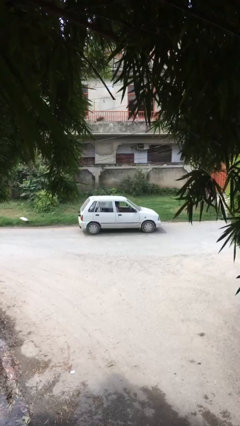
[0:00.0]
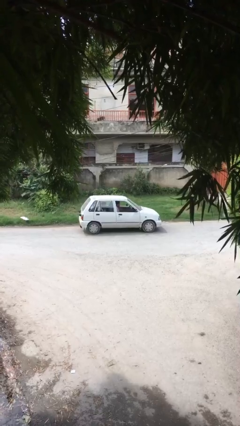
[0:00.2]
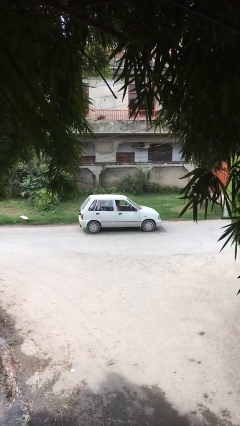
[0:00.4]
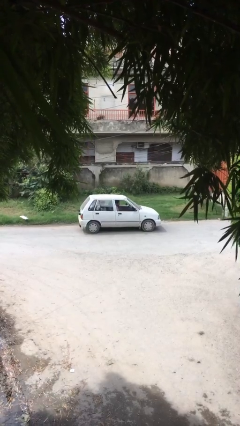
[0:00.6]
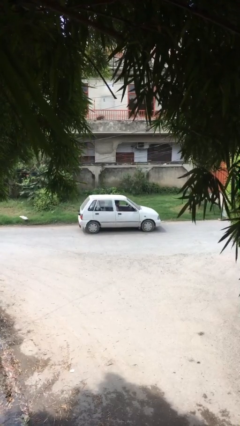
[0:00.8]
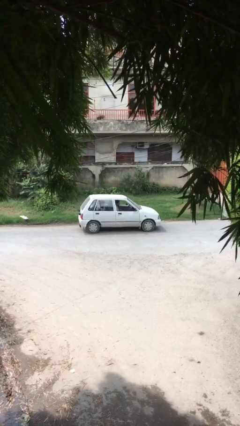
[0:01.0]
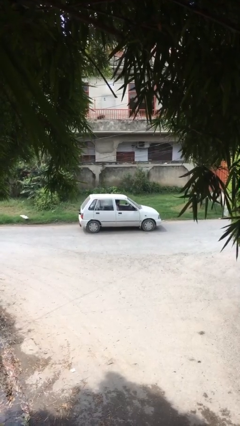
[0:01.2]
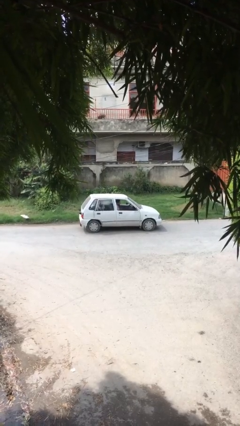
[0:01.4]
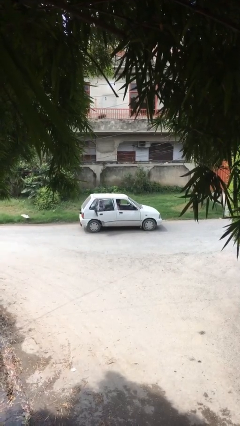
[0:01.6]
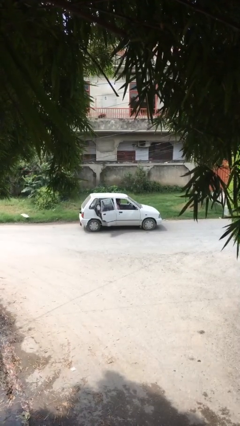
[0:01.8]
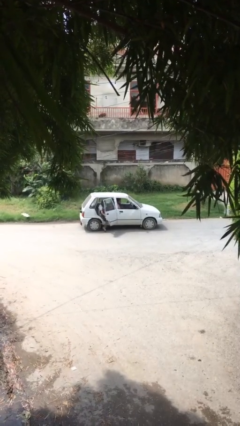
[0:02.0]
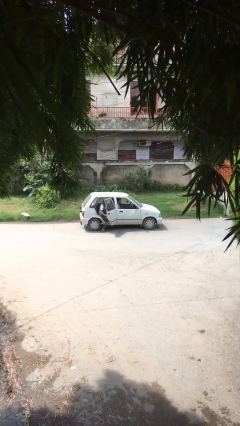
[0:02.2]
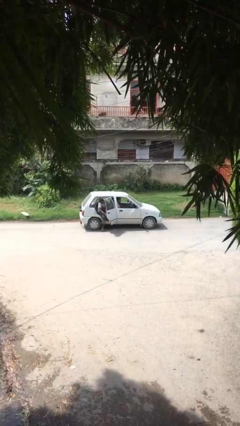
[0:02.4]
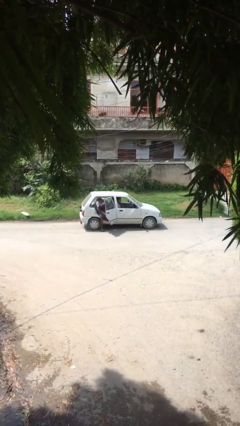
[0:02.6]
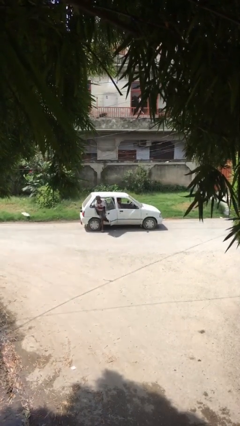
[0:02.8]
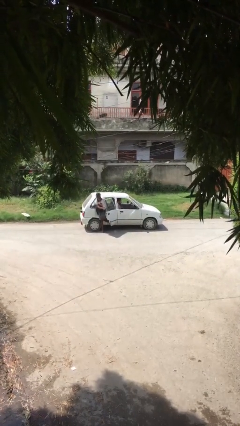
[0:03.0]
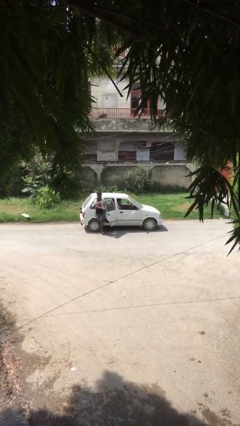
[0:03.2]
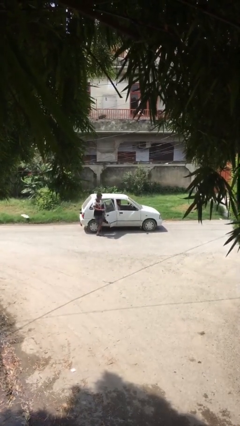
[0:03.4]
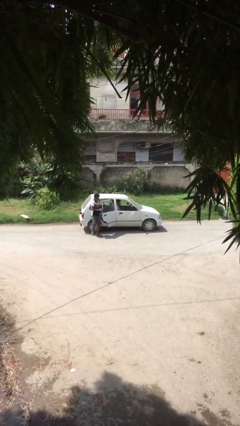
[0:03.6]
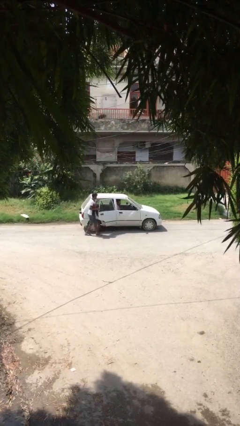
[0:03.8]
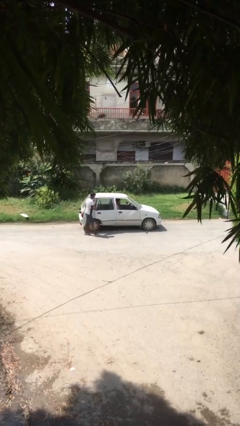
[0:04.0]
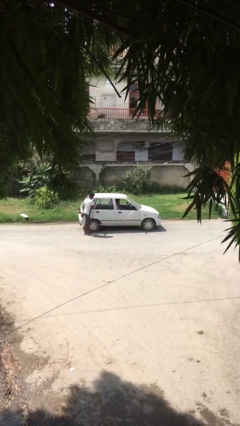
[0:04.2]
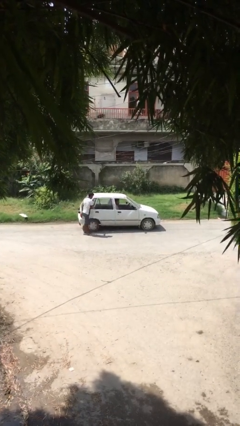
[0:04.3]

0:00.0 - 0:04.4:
car drops off person

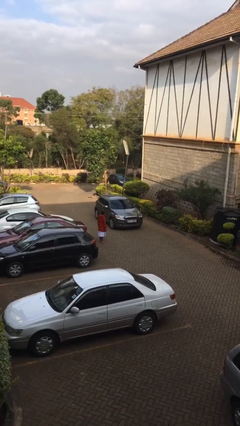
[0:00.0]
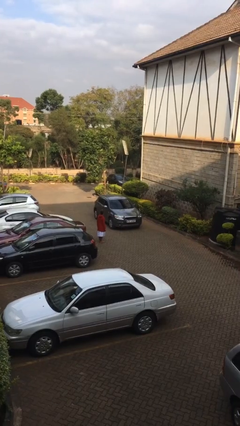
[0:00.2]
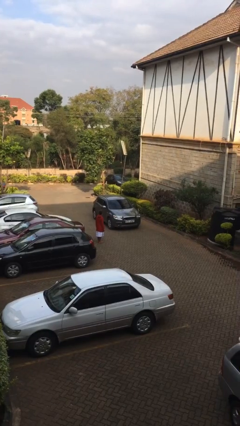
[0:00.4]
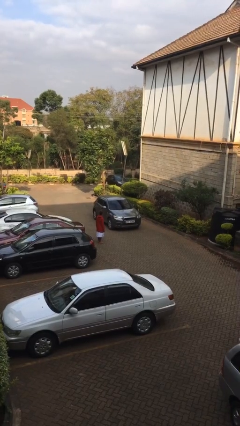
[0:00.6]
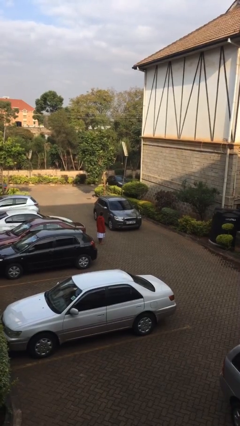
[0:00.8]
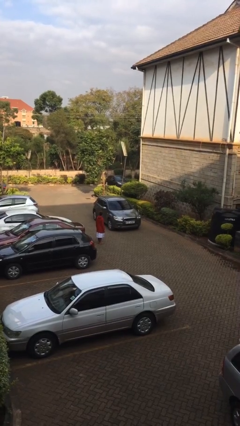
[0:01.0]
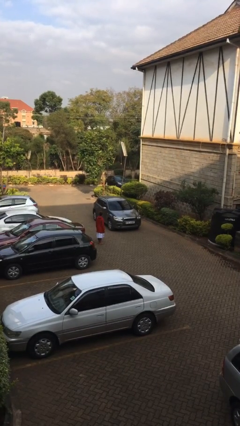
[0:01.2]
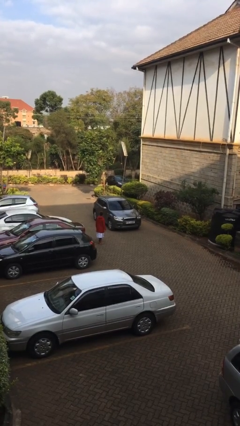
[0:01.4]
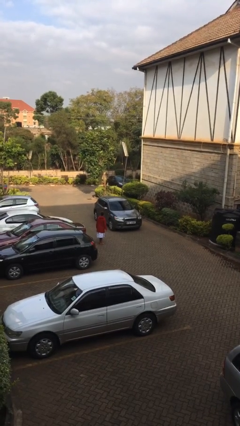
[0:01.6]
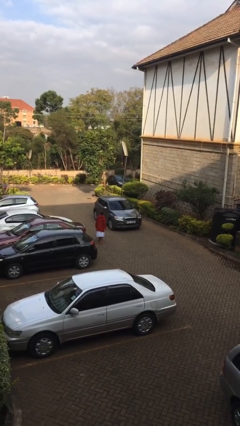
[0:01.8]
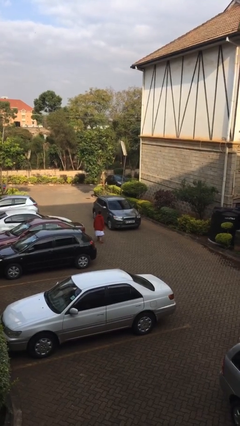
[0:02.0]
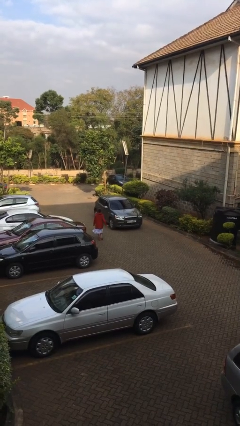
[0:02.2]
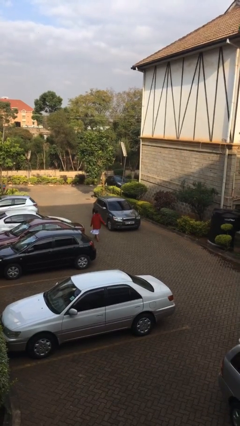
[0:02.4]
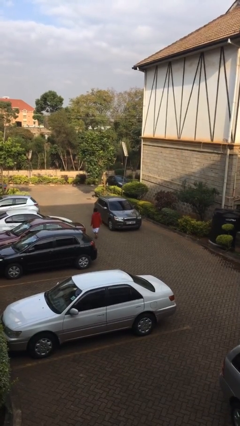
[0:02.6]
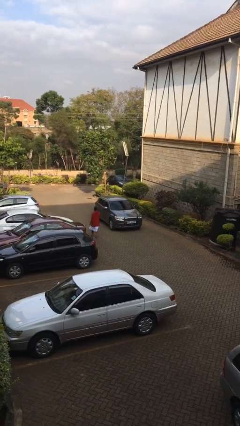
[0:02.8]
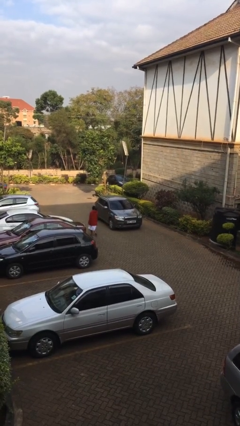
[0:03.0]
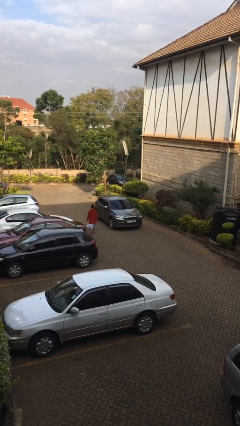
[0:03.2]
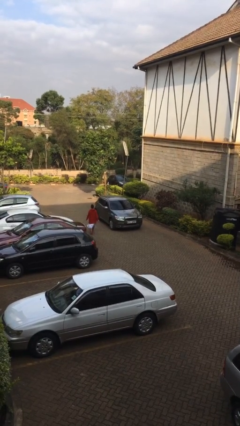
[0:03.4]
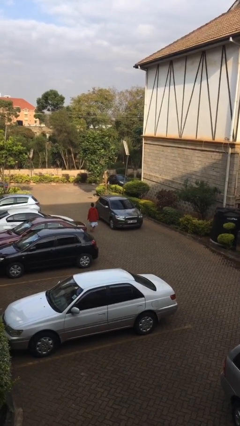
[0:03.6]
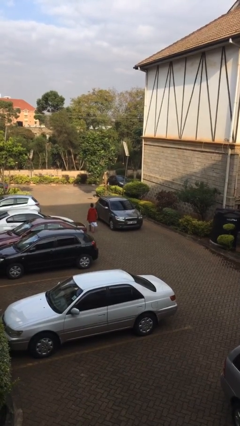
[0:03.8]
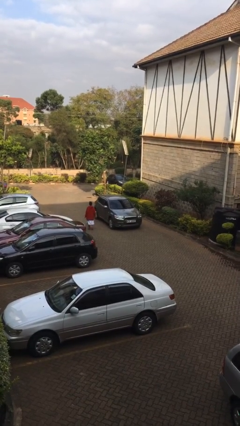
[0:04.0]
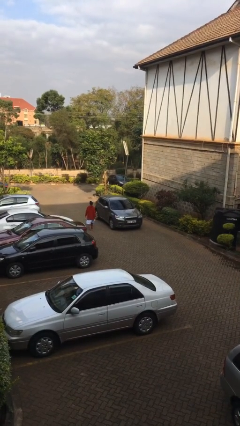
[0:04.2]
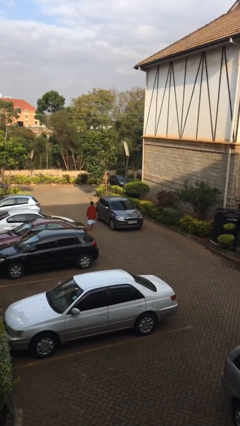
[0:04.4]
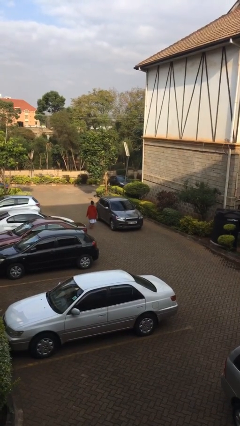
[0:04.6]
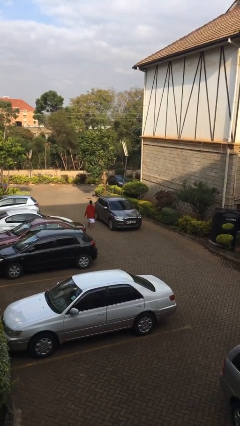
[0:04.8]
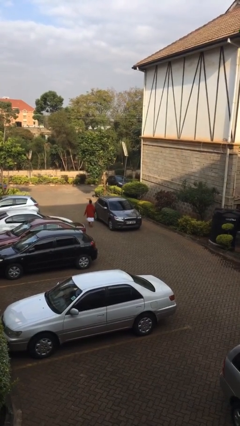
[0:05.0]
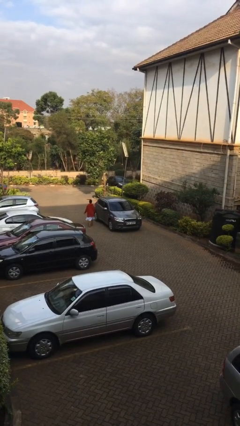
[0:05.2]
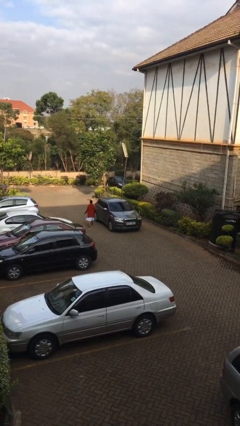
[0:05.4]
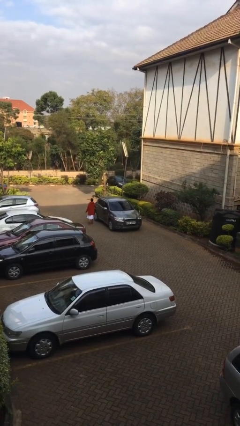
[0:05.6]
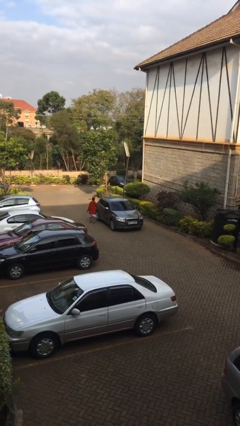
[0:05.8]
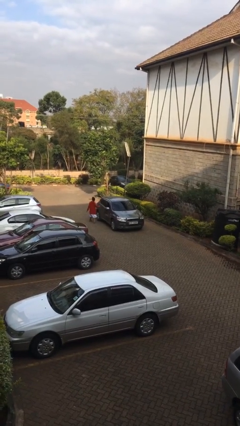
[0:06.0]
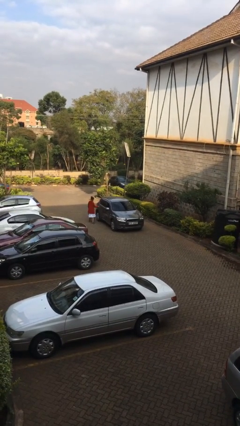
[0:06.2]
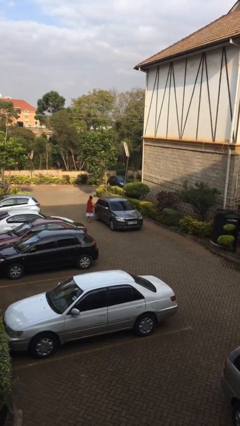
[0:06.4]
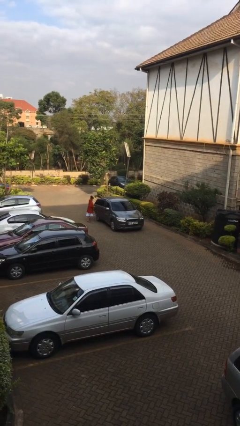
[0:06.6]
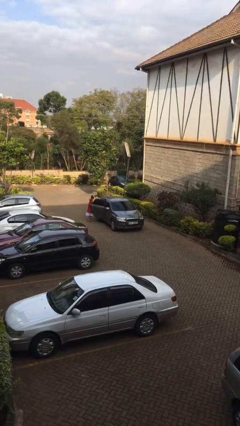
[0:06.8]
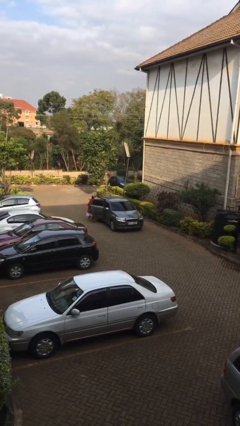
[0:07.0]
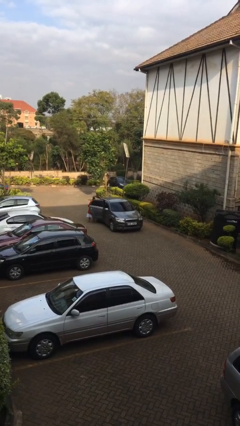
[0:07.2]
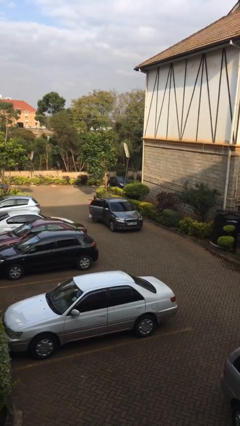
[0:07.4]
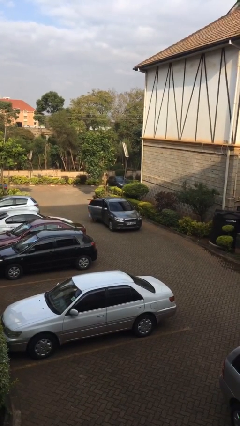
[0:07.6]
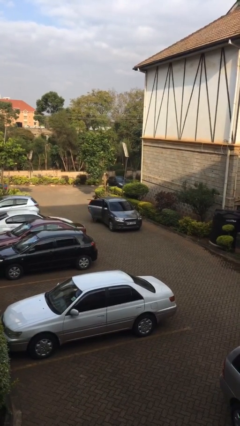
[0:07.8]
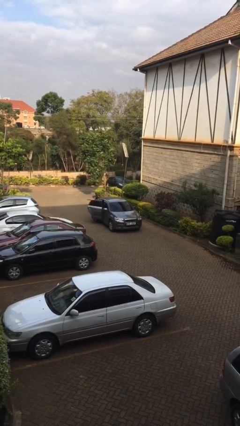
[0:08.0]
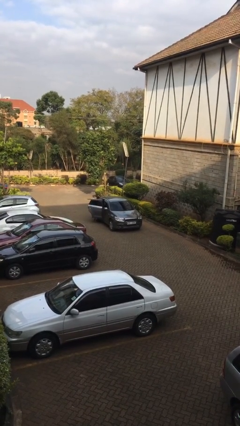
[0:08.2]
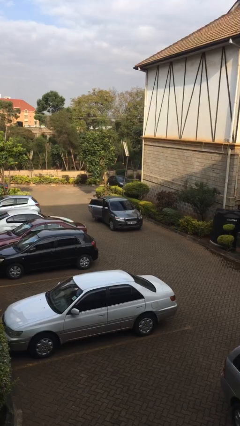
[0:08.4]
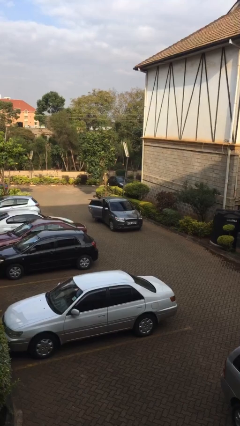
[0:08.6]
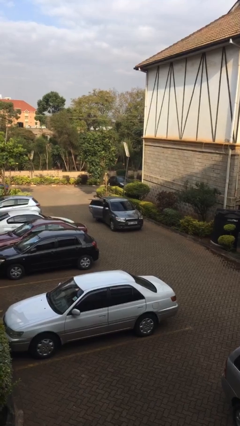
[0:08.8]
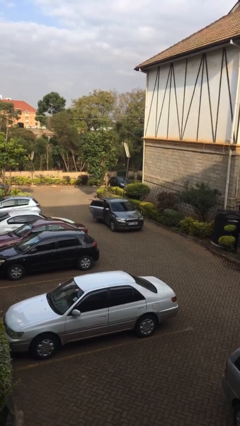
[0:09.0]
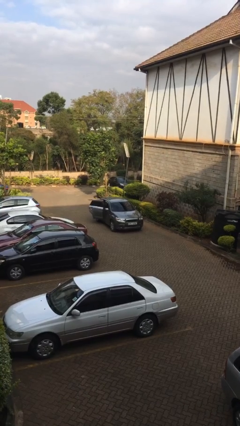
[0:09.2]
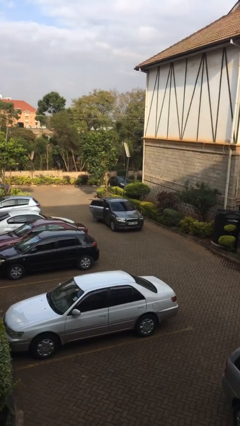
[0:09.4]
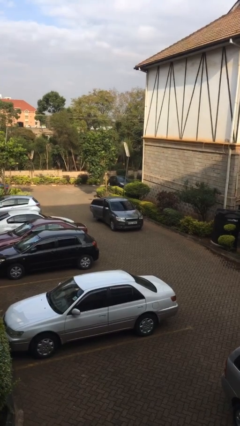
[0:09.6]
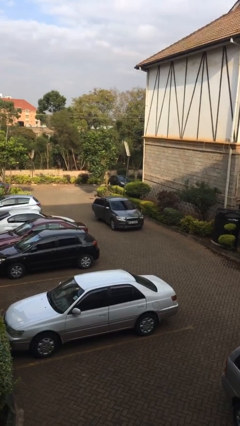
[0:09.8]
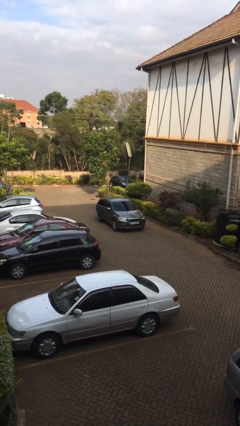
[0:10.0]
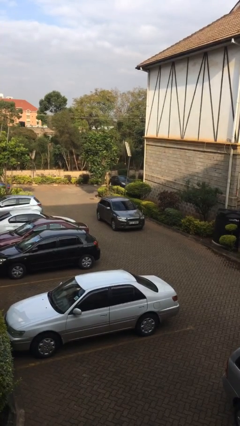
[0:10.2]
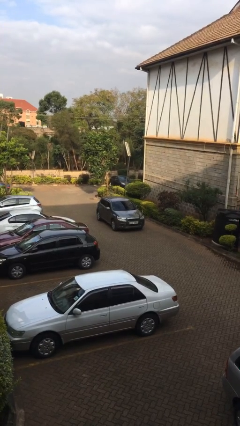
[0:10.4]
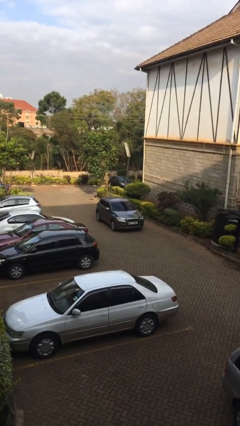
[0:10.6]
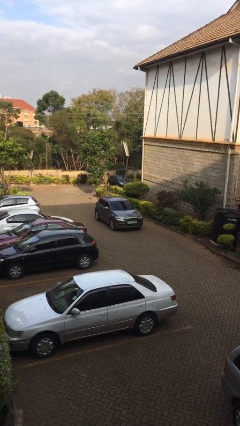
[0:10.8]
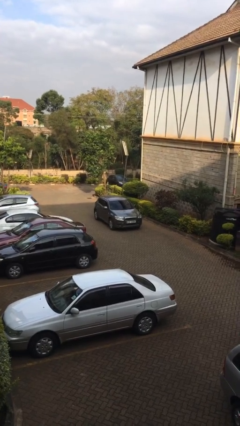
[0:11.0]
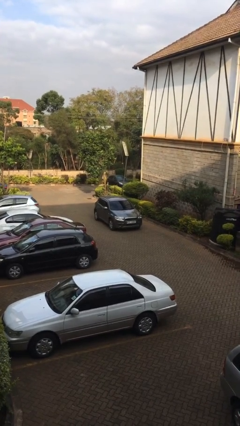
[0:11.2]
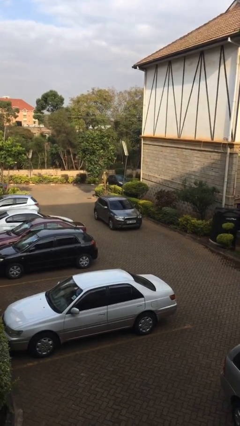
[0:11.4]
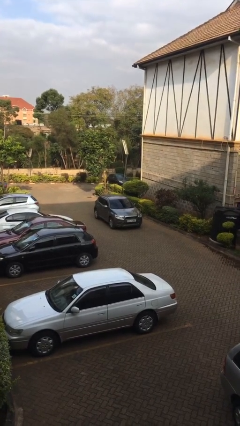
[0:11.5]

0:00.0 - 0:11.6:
car picks up person

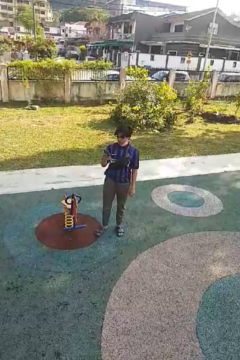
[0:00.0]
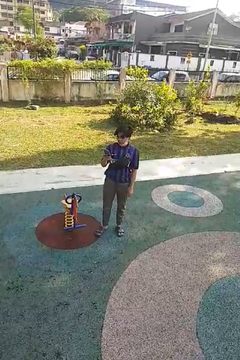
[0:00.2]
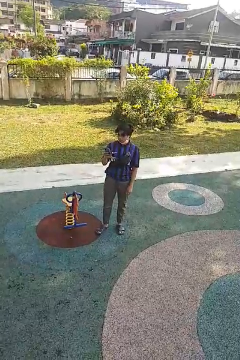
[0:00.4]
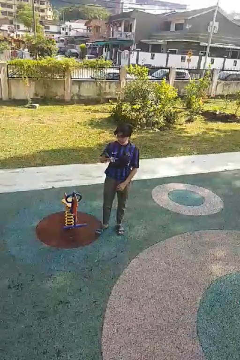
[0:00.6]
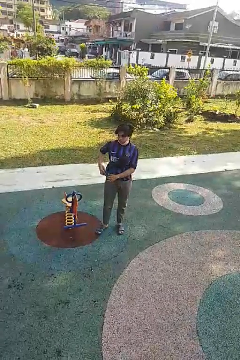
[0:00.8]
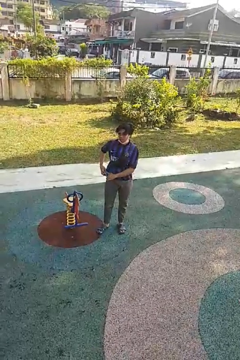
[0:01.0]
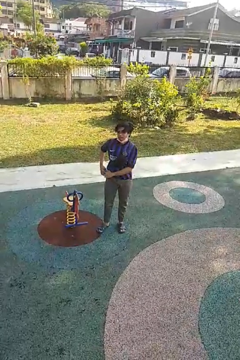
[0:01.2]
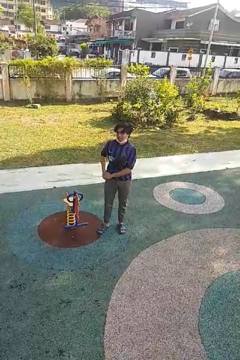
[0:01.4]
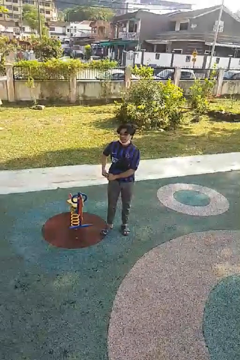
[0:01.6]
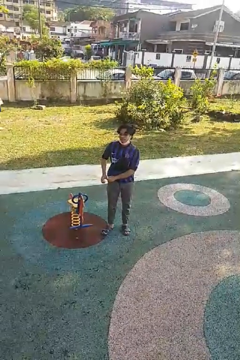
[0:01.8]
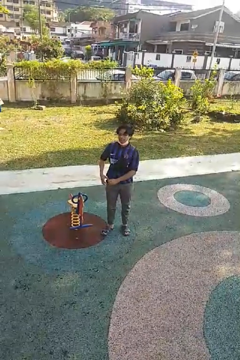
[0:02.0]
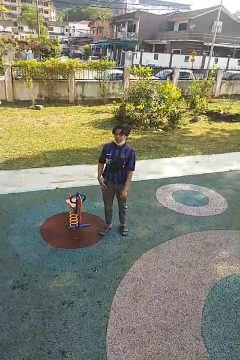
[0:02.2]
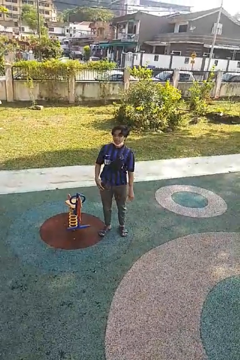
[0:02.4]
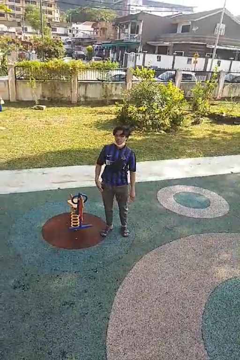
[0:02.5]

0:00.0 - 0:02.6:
person puts phone into pocket
